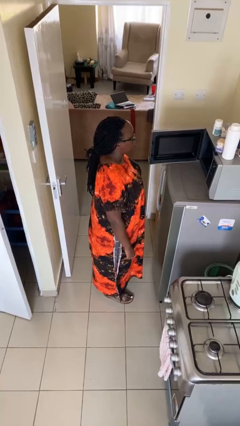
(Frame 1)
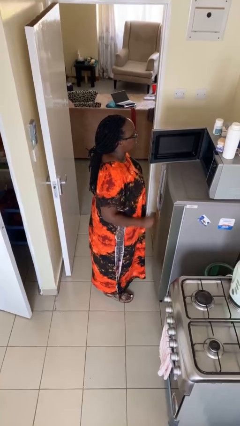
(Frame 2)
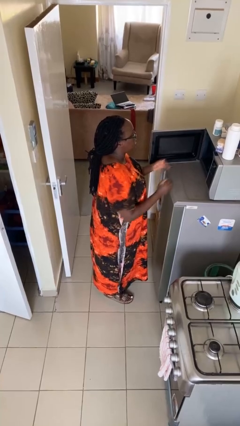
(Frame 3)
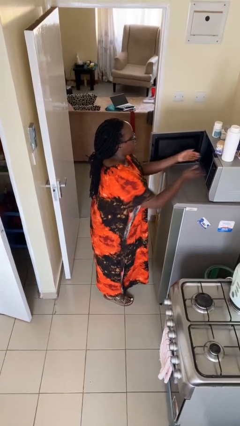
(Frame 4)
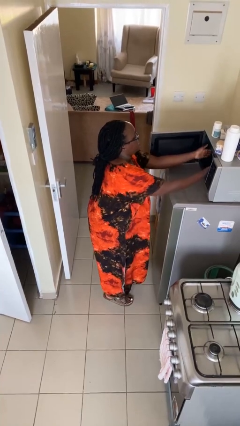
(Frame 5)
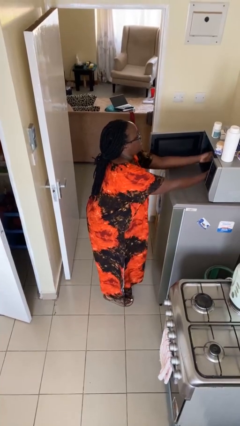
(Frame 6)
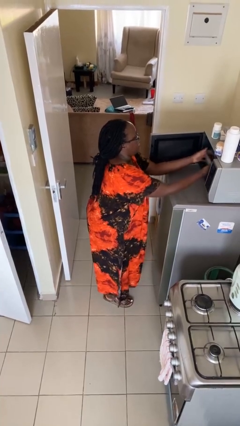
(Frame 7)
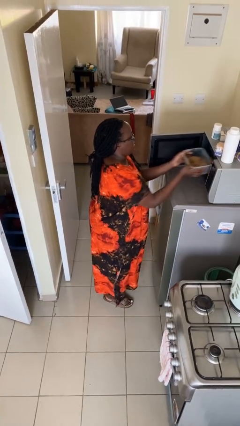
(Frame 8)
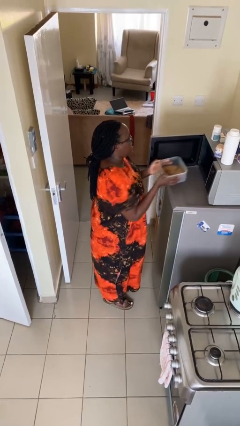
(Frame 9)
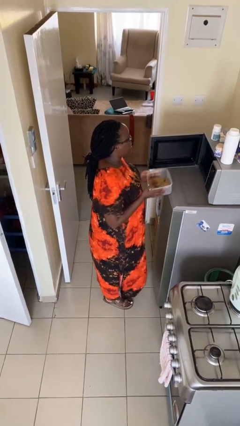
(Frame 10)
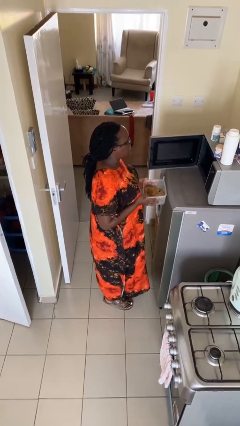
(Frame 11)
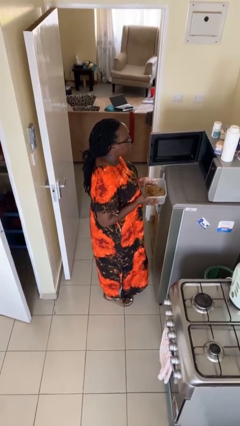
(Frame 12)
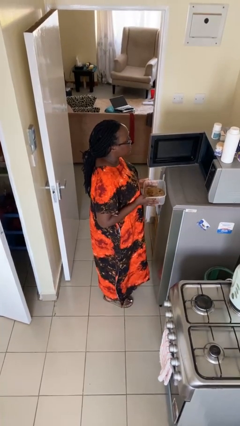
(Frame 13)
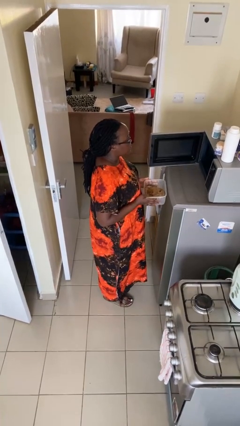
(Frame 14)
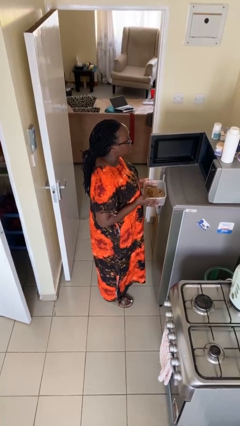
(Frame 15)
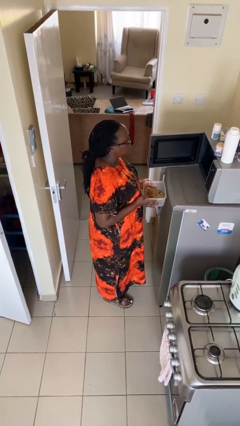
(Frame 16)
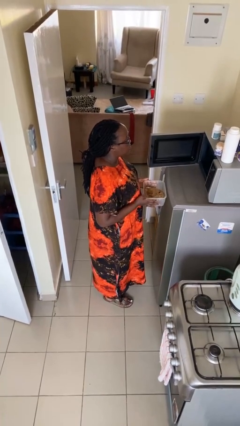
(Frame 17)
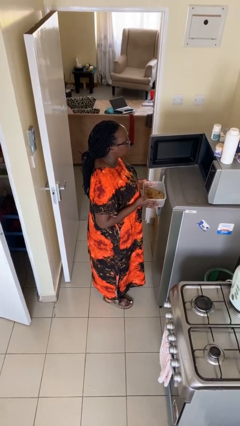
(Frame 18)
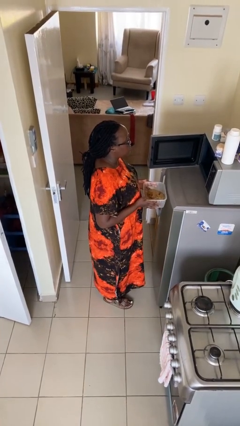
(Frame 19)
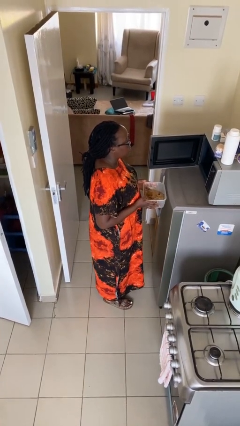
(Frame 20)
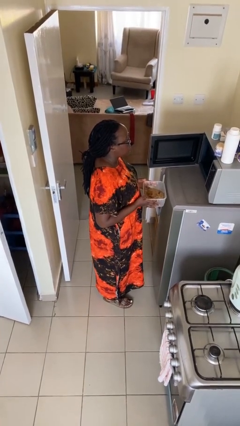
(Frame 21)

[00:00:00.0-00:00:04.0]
person takes object from microwave

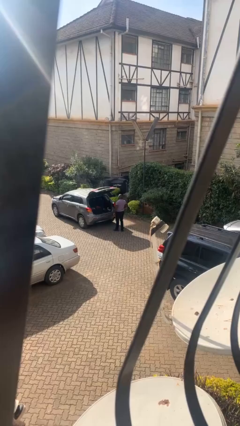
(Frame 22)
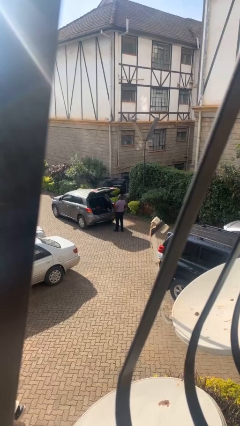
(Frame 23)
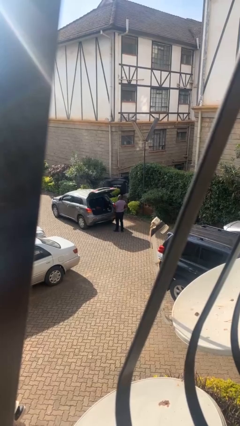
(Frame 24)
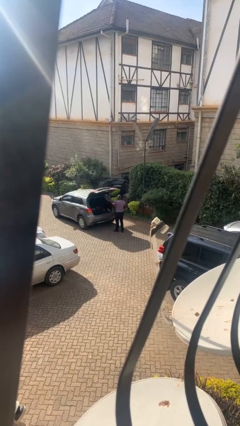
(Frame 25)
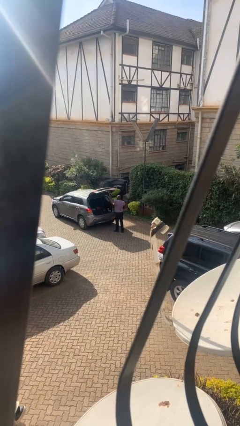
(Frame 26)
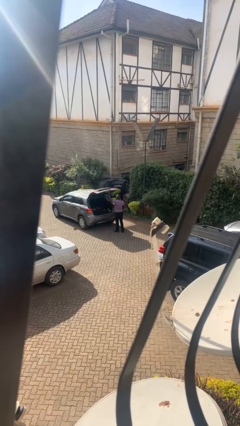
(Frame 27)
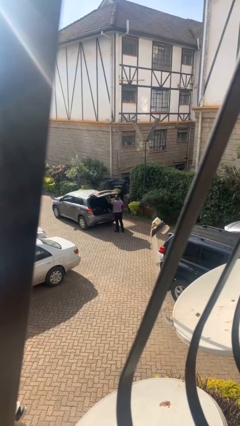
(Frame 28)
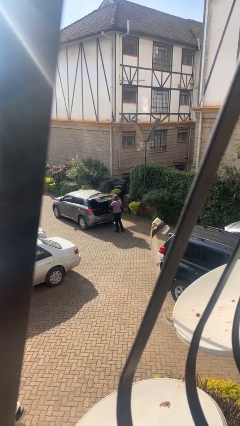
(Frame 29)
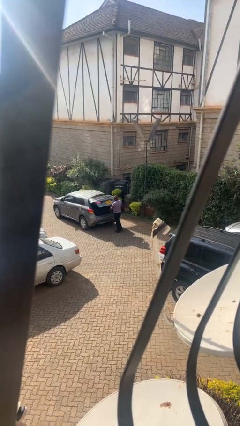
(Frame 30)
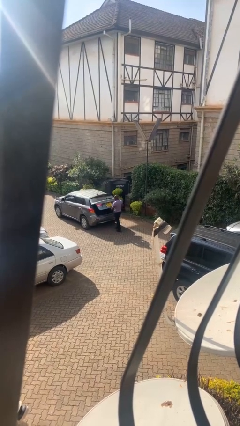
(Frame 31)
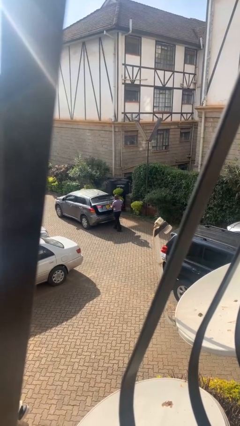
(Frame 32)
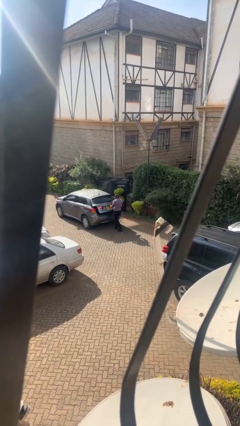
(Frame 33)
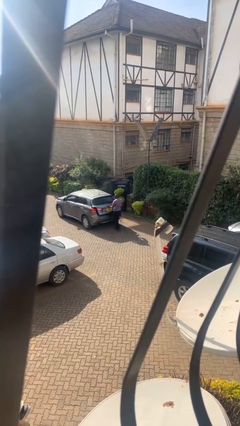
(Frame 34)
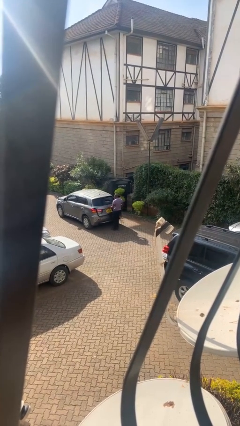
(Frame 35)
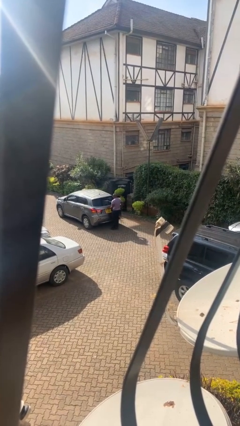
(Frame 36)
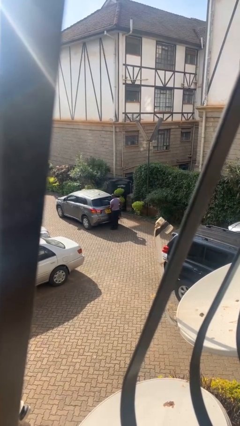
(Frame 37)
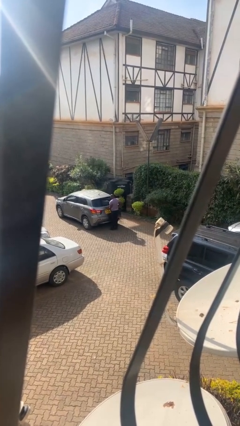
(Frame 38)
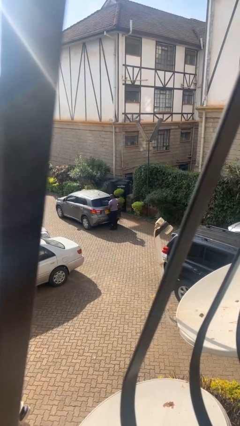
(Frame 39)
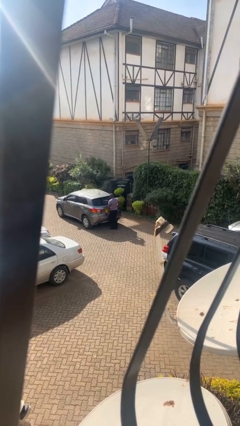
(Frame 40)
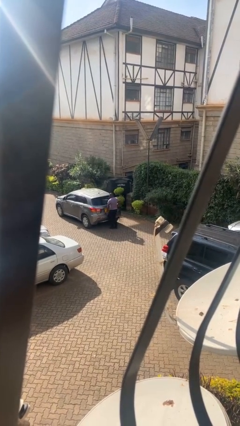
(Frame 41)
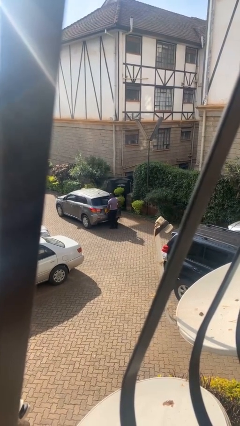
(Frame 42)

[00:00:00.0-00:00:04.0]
person closes car trunk

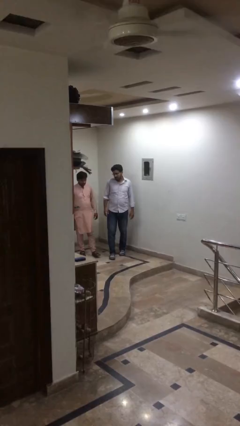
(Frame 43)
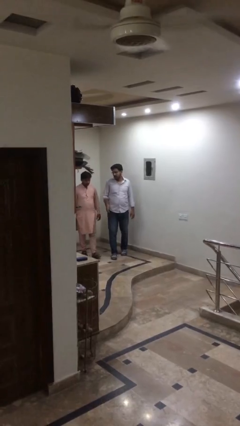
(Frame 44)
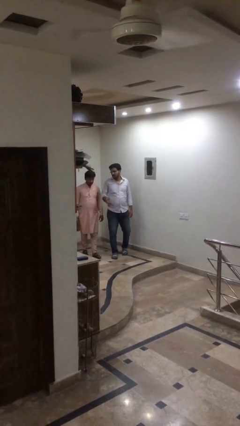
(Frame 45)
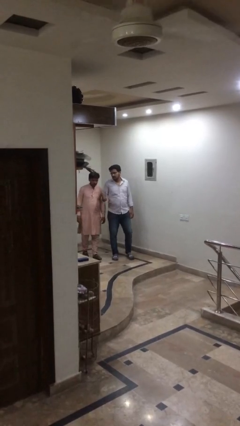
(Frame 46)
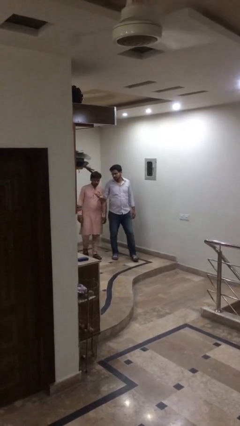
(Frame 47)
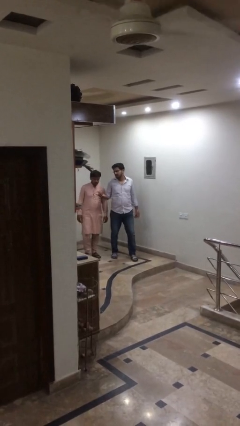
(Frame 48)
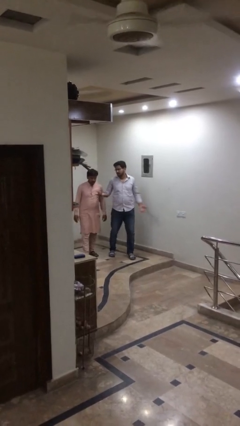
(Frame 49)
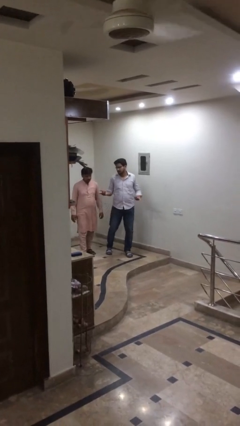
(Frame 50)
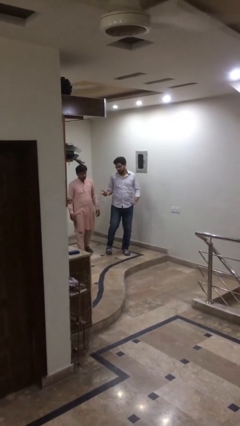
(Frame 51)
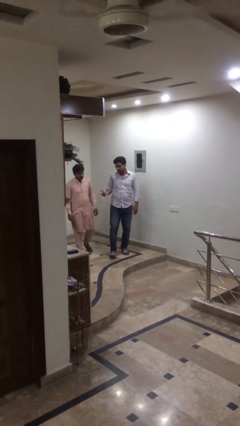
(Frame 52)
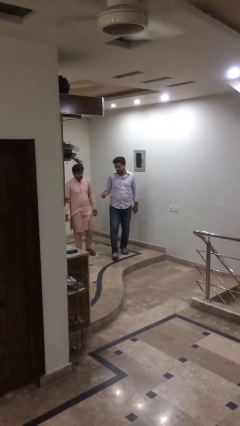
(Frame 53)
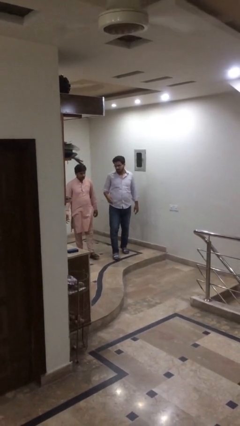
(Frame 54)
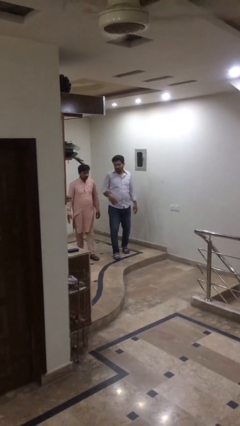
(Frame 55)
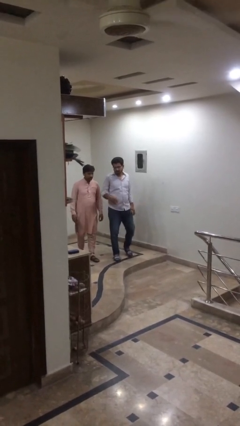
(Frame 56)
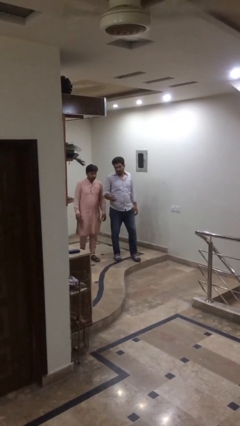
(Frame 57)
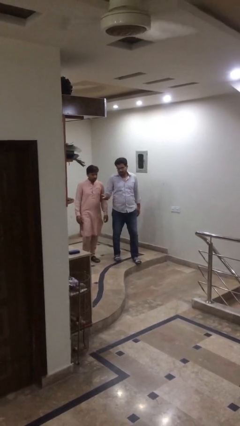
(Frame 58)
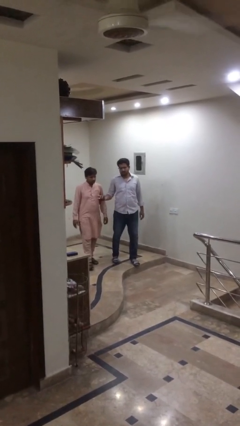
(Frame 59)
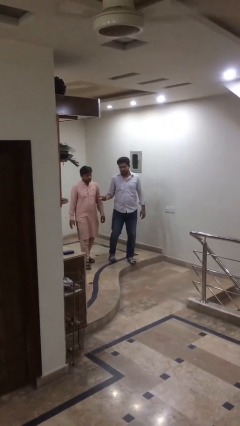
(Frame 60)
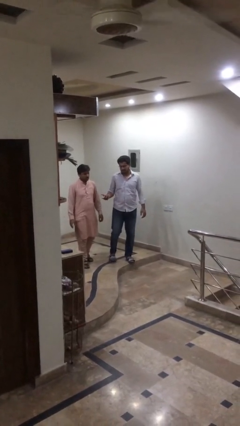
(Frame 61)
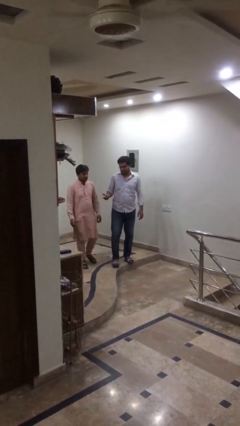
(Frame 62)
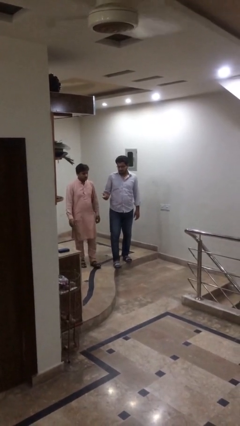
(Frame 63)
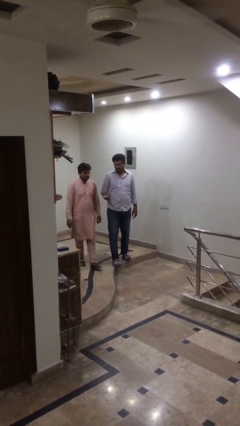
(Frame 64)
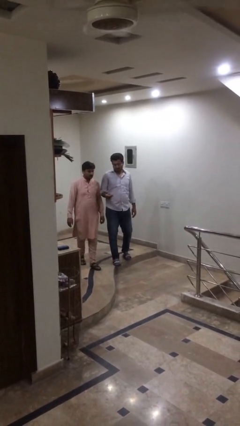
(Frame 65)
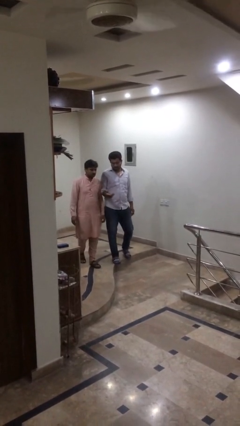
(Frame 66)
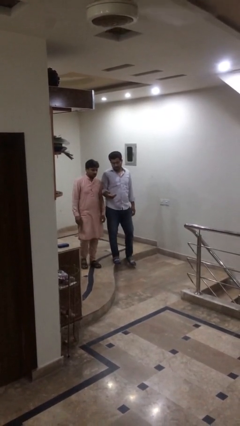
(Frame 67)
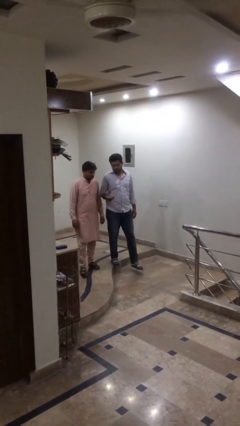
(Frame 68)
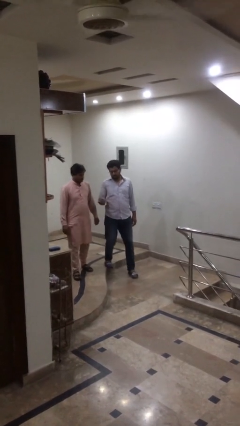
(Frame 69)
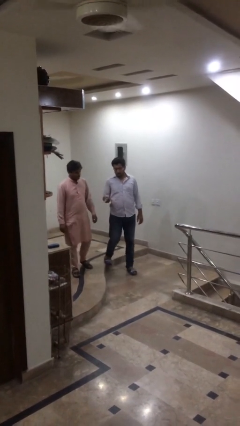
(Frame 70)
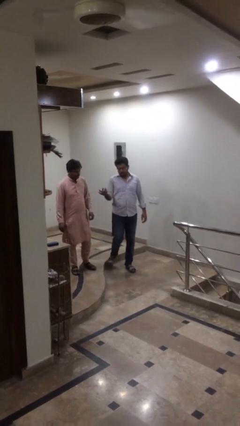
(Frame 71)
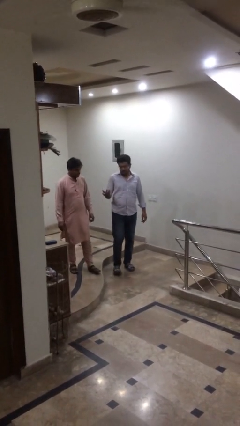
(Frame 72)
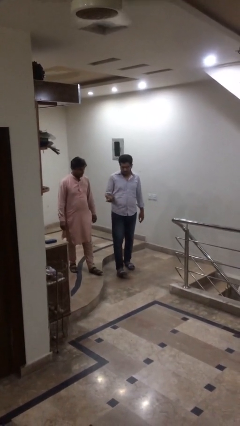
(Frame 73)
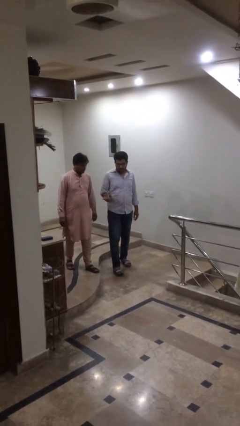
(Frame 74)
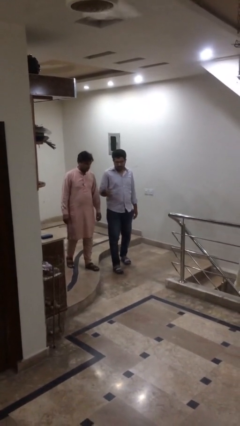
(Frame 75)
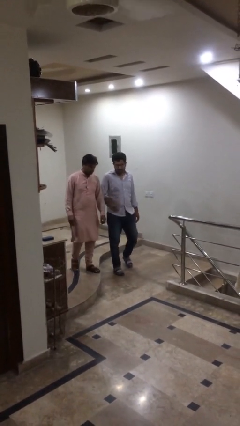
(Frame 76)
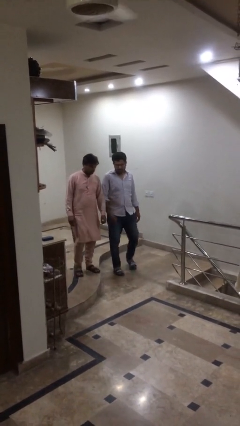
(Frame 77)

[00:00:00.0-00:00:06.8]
person talks to person

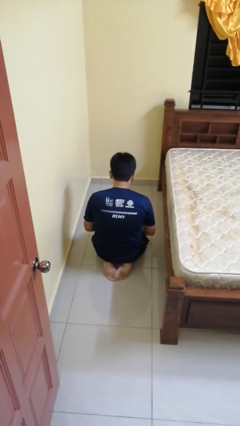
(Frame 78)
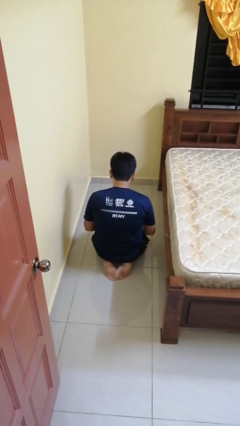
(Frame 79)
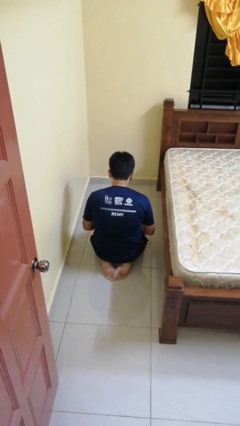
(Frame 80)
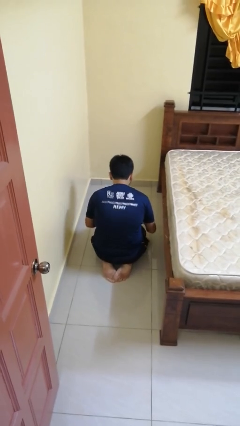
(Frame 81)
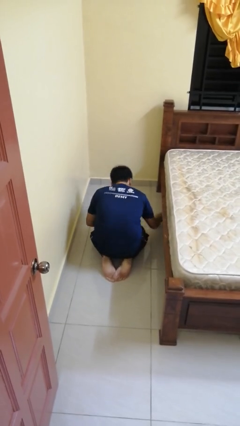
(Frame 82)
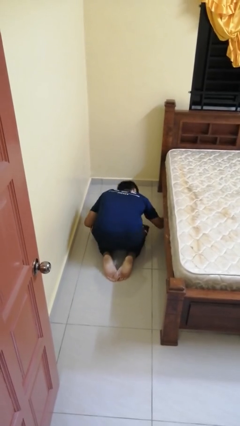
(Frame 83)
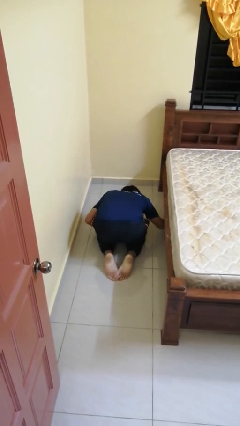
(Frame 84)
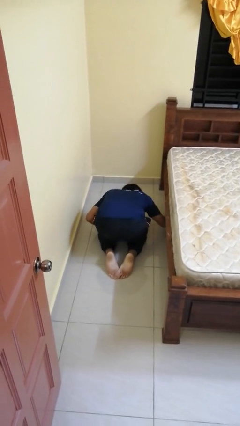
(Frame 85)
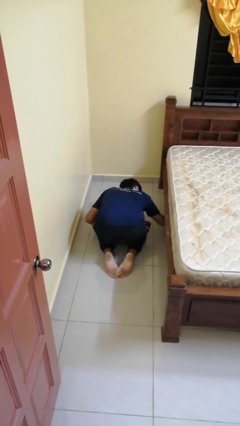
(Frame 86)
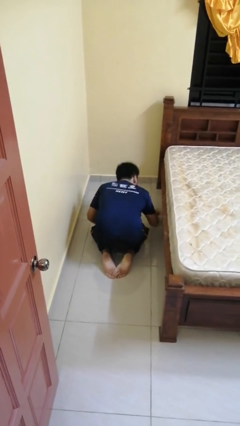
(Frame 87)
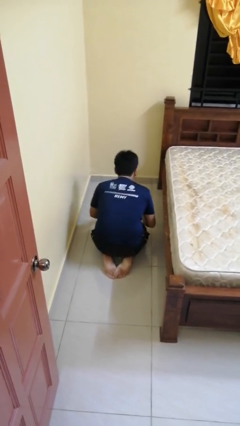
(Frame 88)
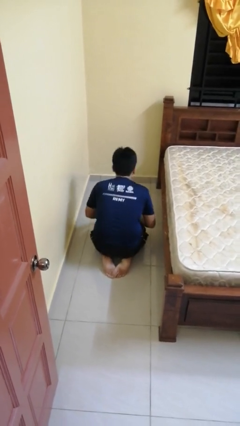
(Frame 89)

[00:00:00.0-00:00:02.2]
person searches under bed

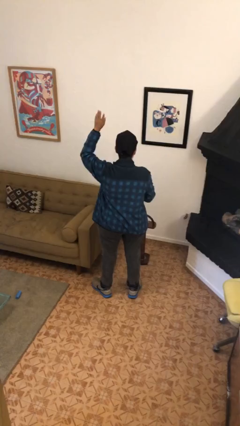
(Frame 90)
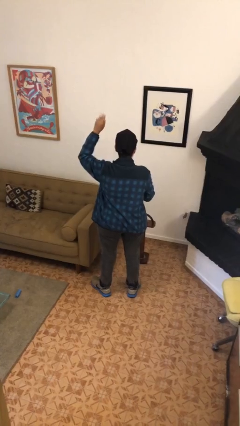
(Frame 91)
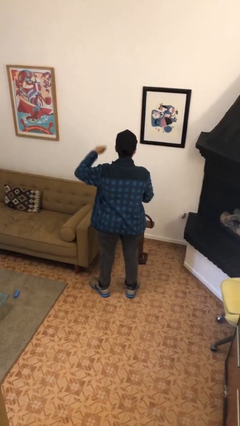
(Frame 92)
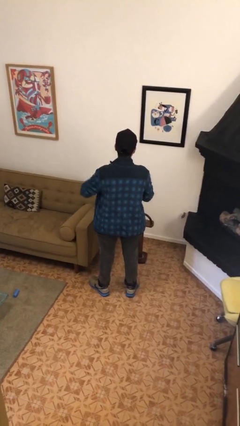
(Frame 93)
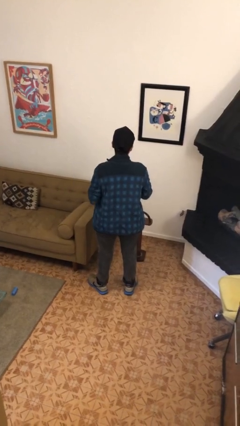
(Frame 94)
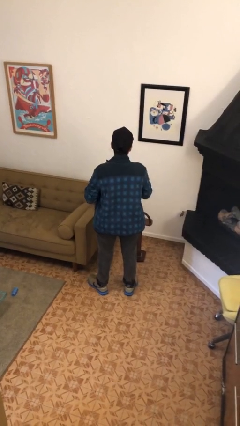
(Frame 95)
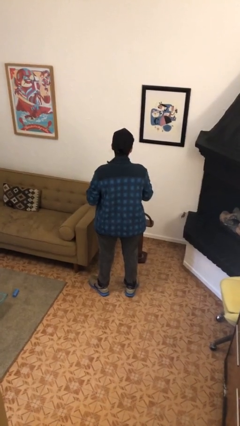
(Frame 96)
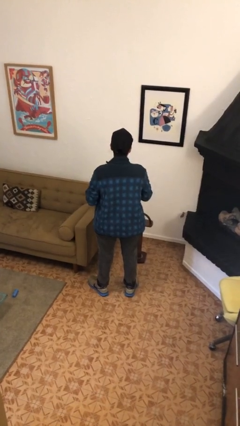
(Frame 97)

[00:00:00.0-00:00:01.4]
person gestures lower hand
